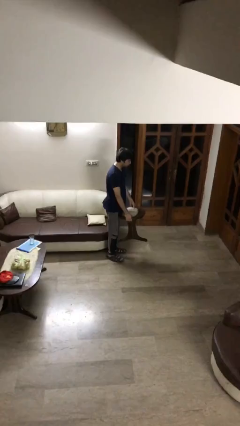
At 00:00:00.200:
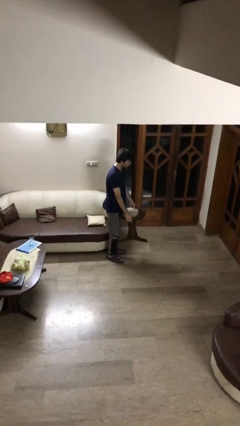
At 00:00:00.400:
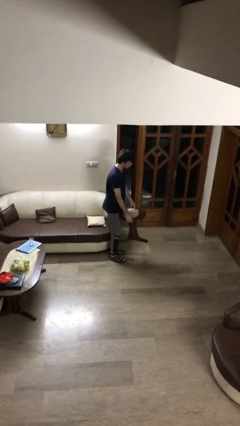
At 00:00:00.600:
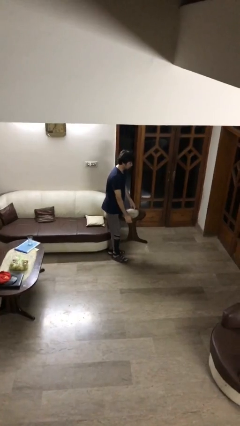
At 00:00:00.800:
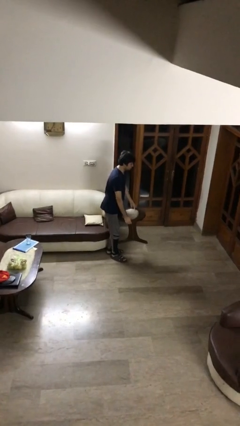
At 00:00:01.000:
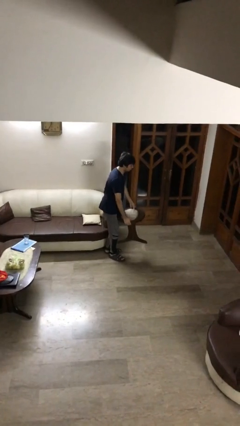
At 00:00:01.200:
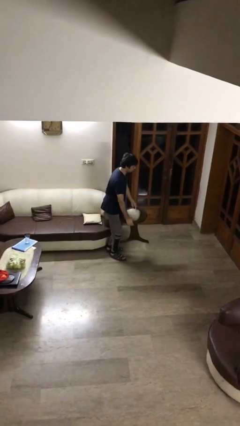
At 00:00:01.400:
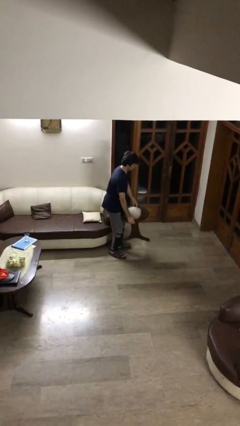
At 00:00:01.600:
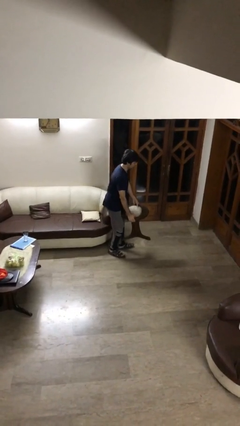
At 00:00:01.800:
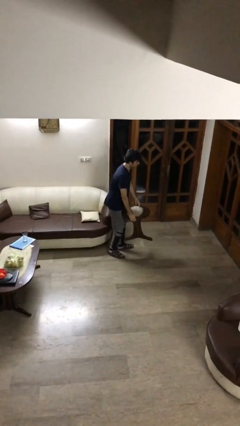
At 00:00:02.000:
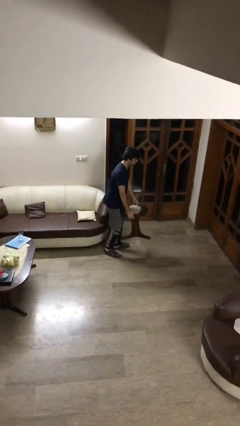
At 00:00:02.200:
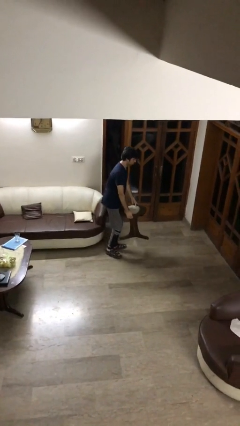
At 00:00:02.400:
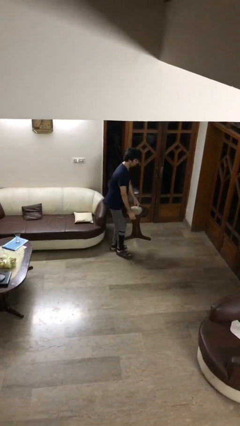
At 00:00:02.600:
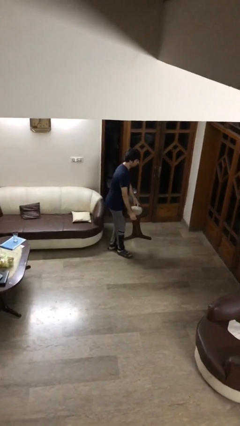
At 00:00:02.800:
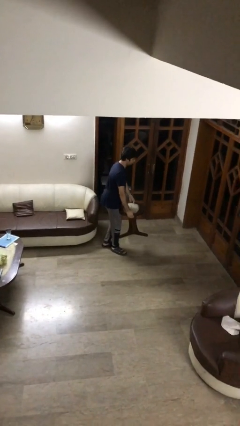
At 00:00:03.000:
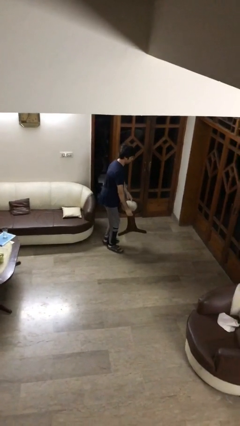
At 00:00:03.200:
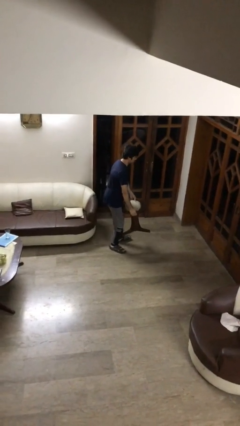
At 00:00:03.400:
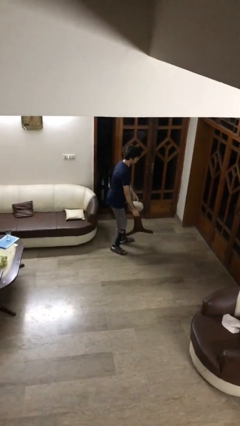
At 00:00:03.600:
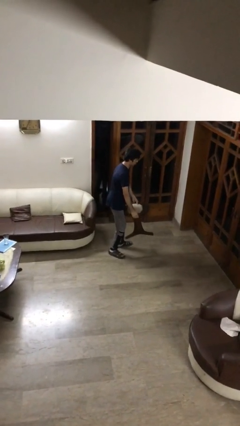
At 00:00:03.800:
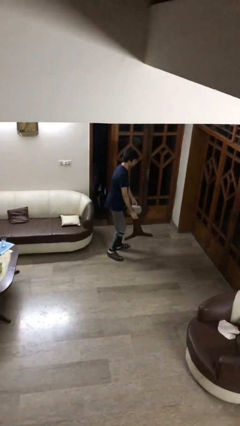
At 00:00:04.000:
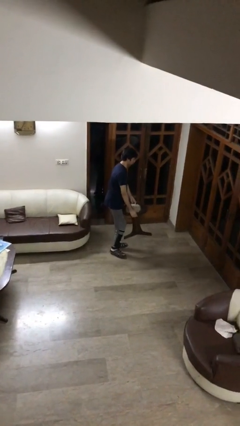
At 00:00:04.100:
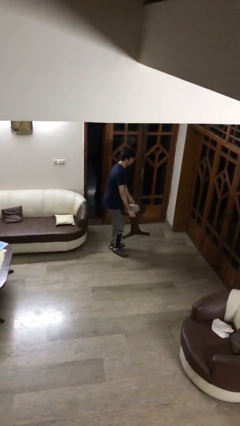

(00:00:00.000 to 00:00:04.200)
person carries heavy object

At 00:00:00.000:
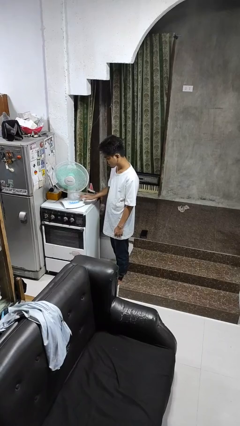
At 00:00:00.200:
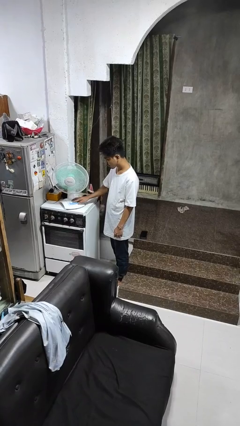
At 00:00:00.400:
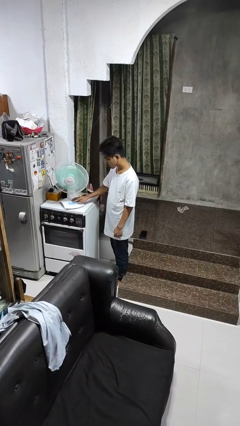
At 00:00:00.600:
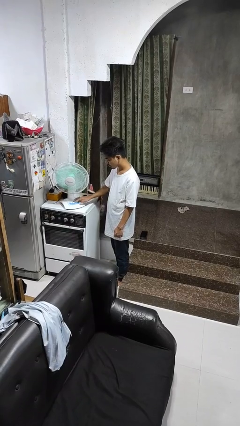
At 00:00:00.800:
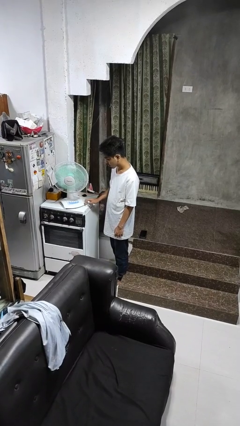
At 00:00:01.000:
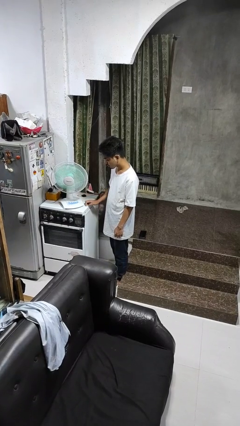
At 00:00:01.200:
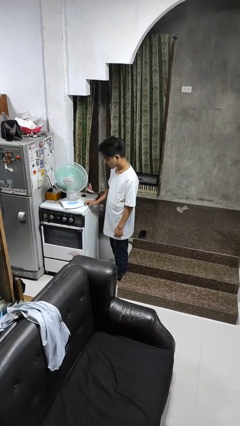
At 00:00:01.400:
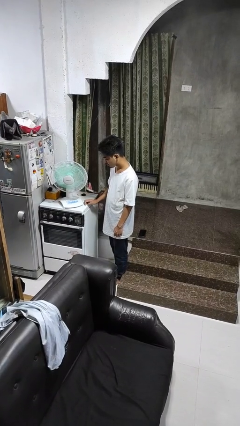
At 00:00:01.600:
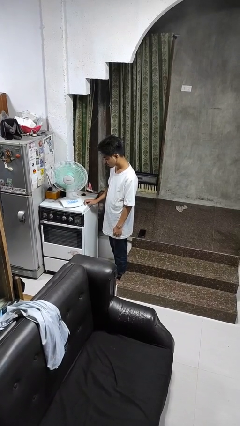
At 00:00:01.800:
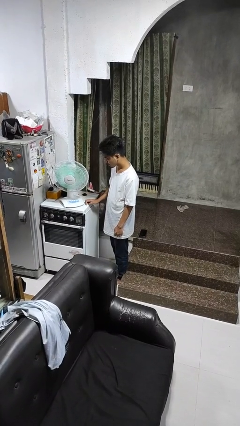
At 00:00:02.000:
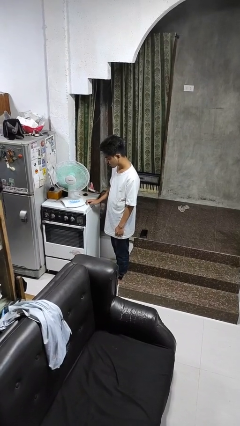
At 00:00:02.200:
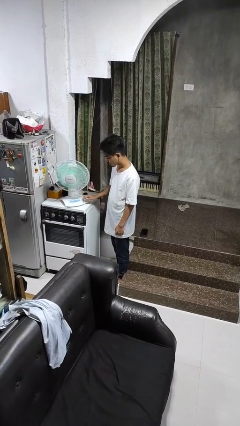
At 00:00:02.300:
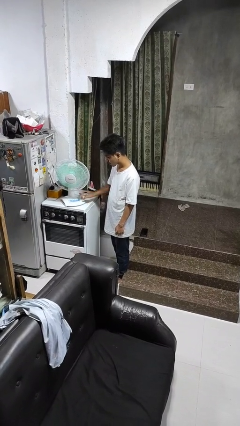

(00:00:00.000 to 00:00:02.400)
person turns on fan

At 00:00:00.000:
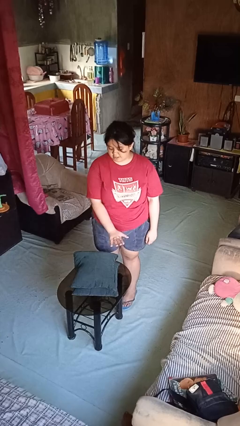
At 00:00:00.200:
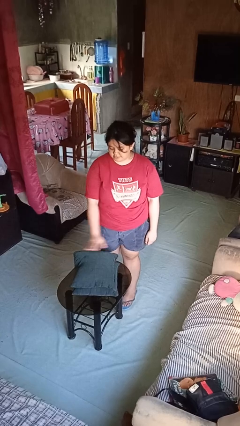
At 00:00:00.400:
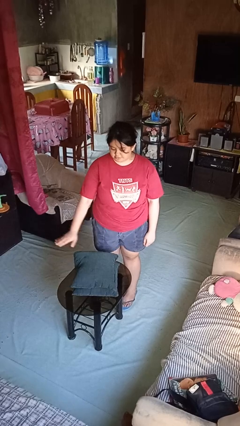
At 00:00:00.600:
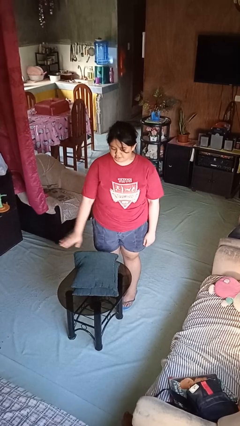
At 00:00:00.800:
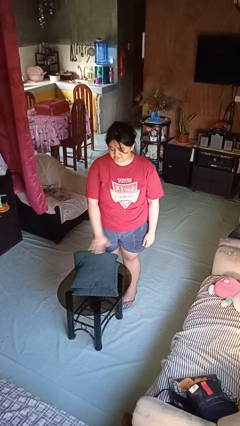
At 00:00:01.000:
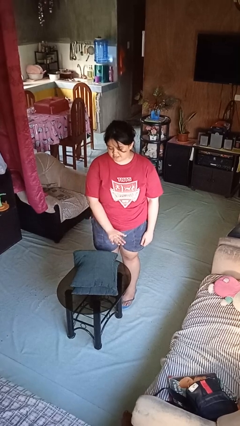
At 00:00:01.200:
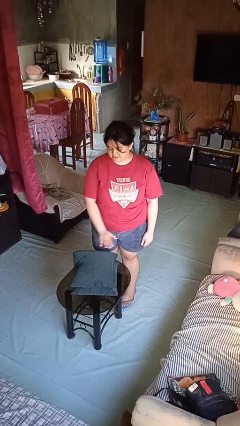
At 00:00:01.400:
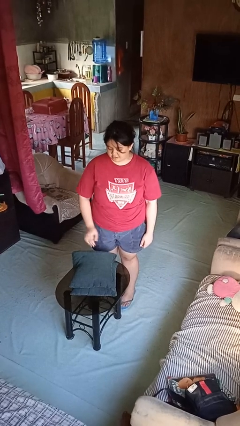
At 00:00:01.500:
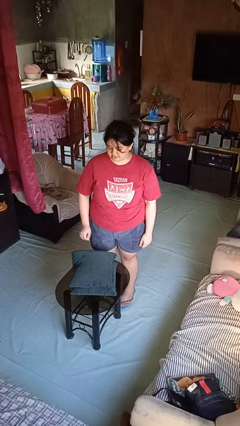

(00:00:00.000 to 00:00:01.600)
person waves hand over object

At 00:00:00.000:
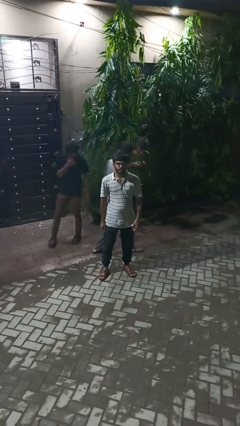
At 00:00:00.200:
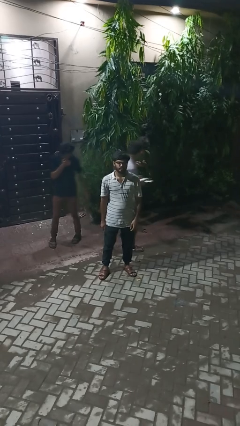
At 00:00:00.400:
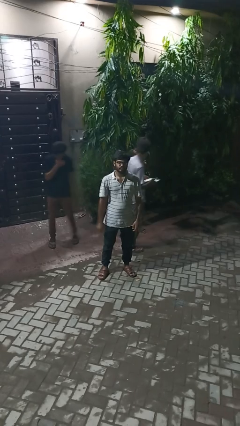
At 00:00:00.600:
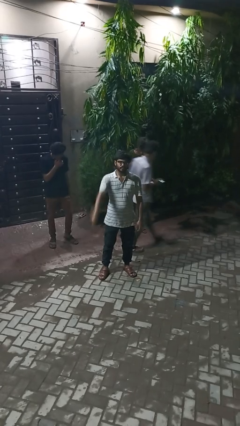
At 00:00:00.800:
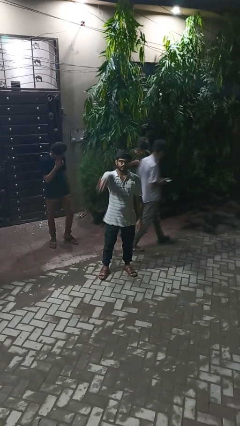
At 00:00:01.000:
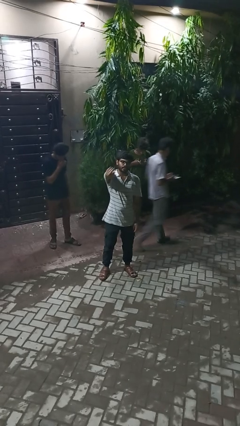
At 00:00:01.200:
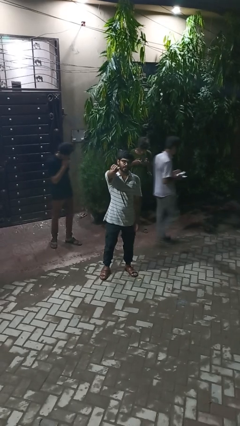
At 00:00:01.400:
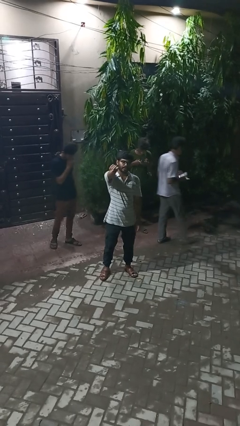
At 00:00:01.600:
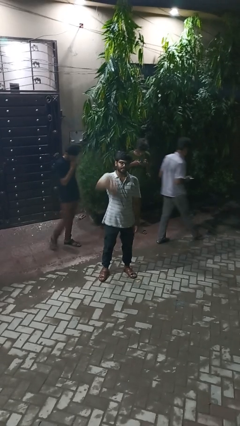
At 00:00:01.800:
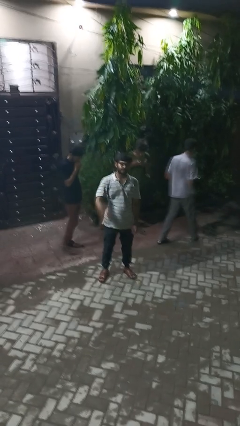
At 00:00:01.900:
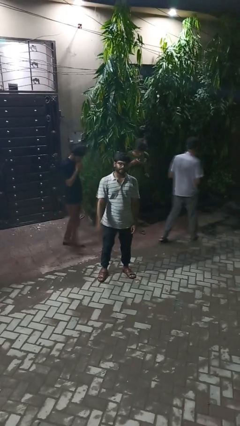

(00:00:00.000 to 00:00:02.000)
person points at person

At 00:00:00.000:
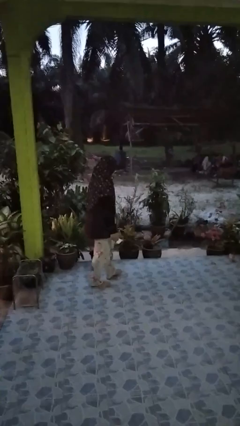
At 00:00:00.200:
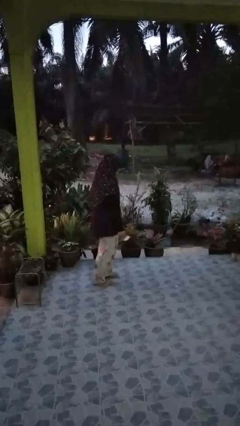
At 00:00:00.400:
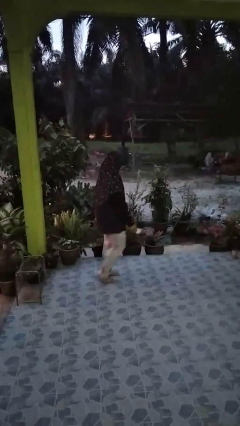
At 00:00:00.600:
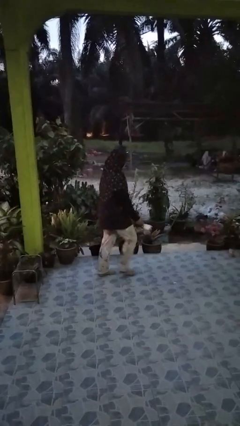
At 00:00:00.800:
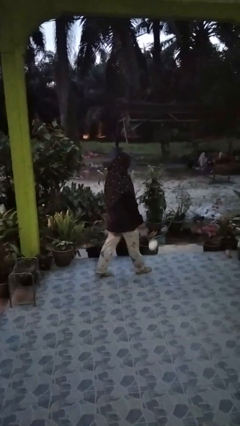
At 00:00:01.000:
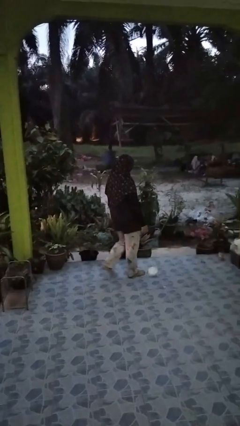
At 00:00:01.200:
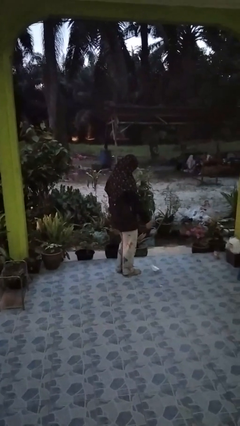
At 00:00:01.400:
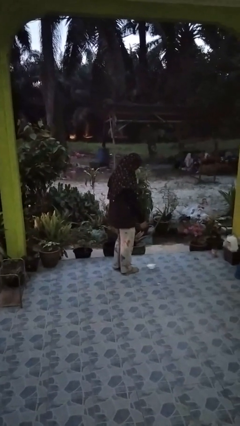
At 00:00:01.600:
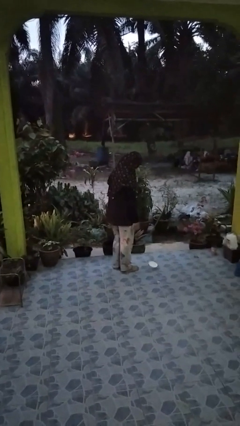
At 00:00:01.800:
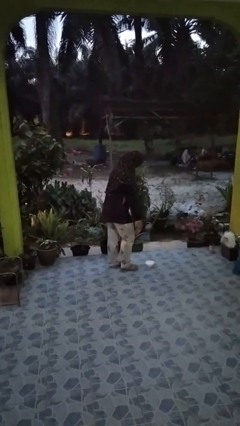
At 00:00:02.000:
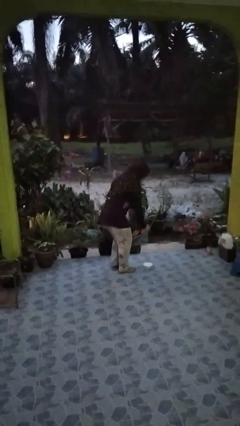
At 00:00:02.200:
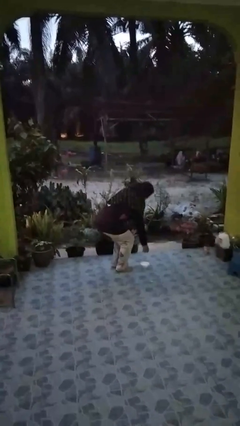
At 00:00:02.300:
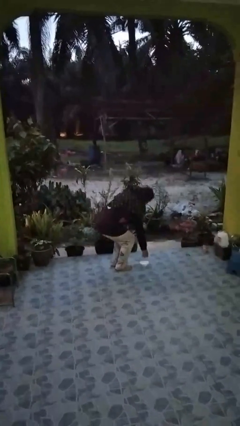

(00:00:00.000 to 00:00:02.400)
person drops object

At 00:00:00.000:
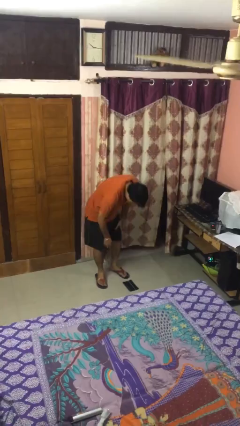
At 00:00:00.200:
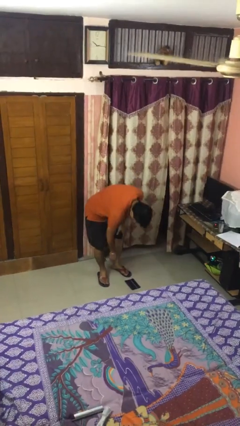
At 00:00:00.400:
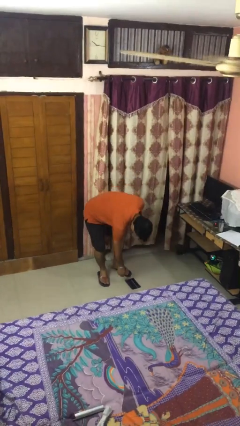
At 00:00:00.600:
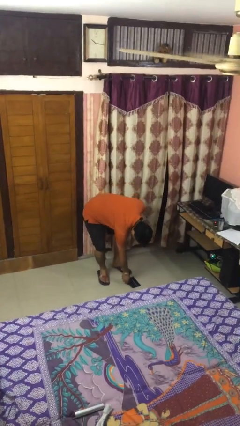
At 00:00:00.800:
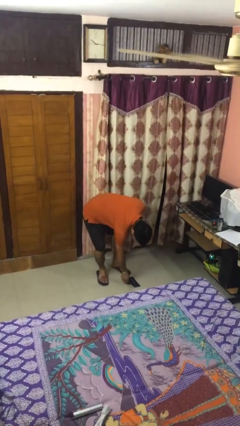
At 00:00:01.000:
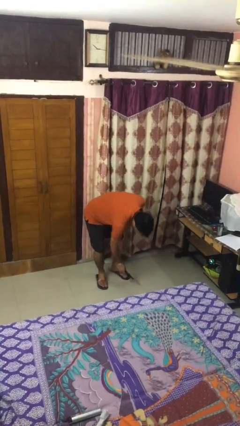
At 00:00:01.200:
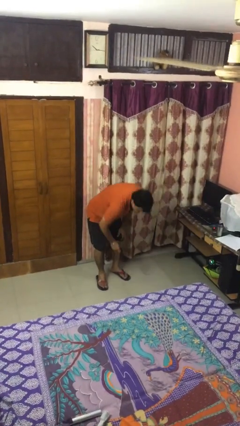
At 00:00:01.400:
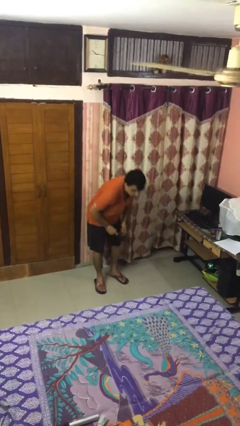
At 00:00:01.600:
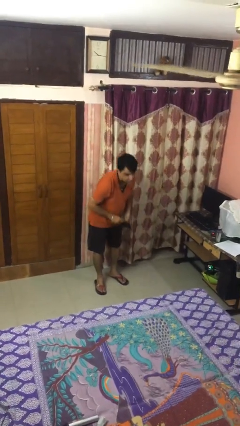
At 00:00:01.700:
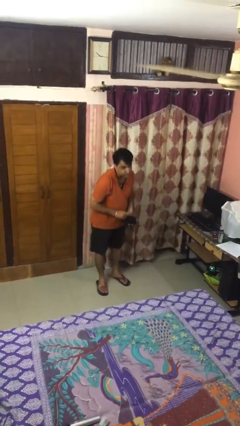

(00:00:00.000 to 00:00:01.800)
person picks up object from floor

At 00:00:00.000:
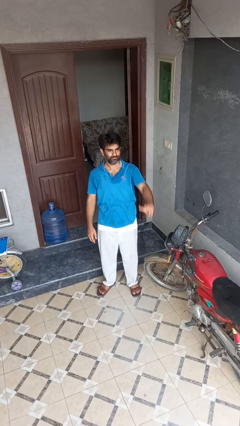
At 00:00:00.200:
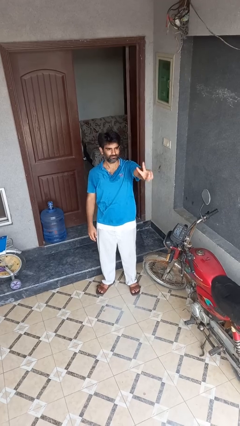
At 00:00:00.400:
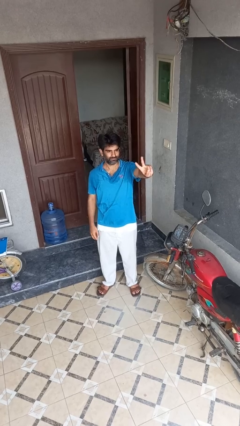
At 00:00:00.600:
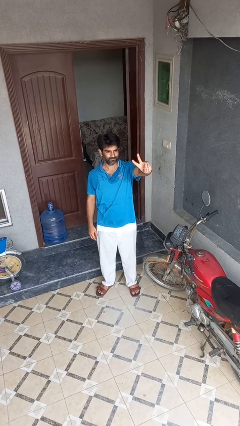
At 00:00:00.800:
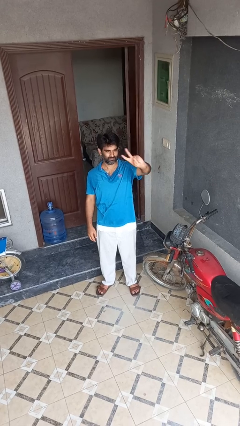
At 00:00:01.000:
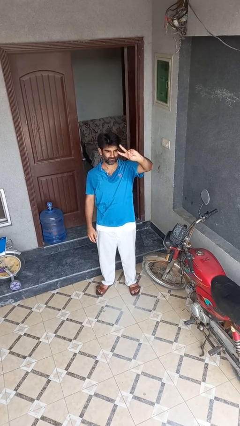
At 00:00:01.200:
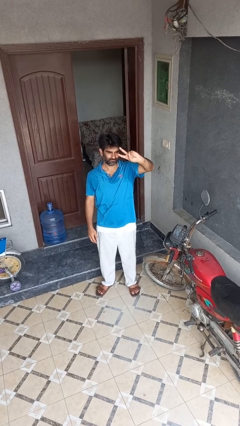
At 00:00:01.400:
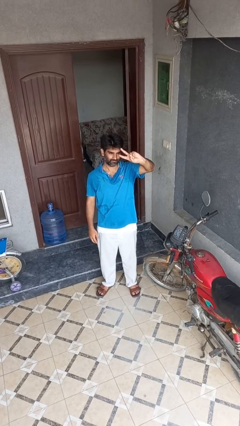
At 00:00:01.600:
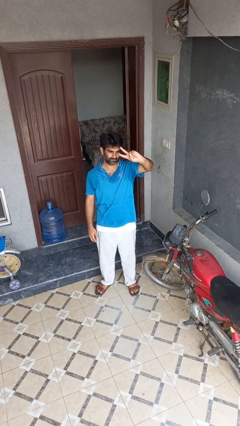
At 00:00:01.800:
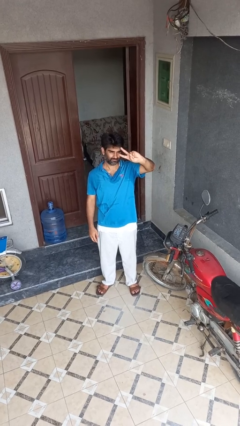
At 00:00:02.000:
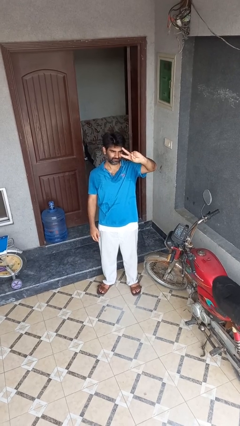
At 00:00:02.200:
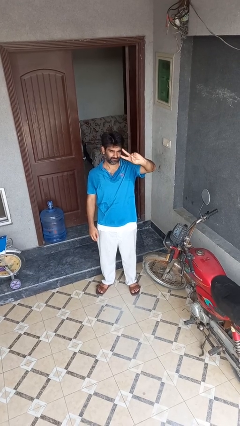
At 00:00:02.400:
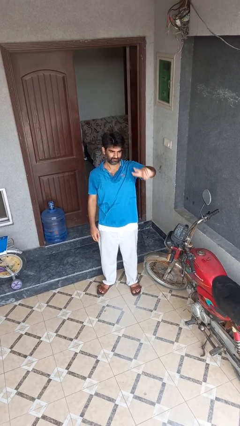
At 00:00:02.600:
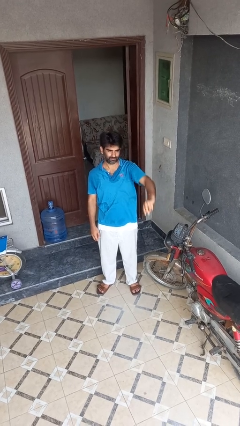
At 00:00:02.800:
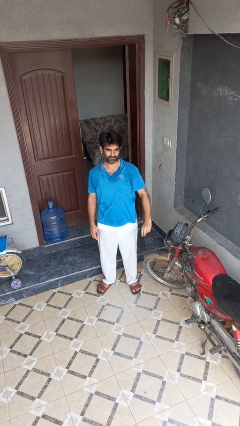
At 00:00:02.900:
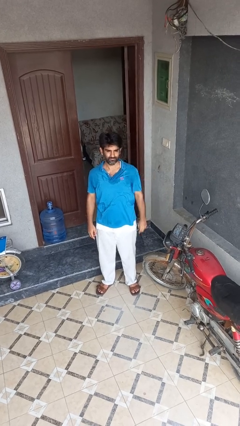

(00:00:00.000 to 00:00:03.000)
person gestures peace
